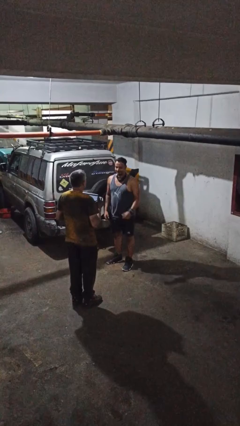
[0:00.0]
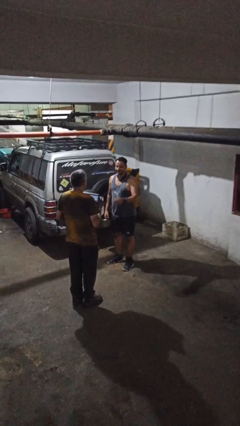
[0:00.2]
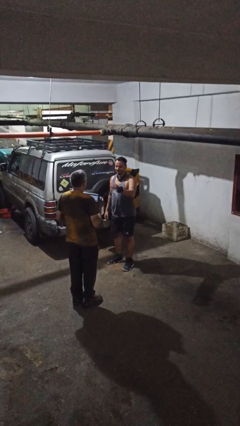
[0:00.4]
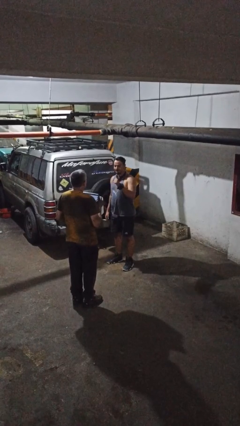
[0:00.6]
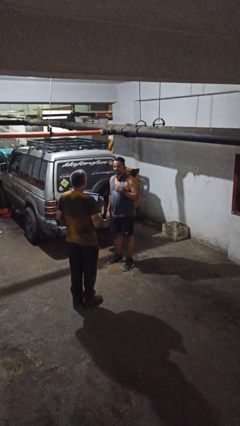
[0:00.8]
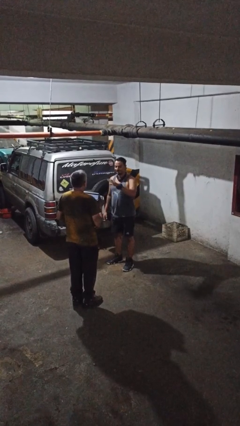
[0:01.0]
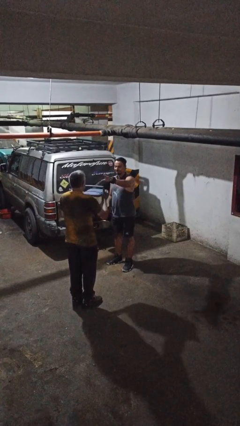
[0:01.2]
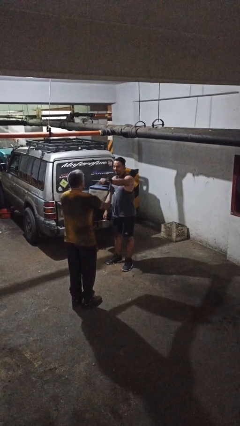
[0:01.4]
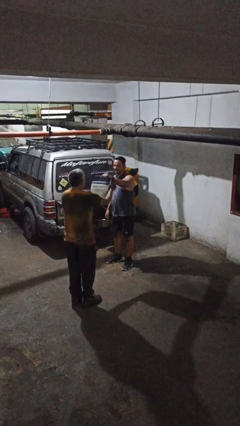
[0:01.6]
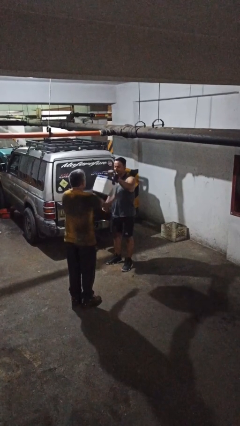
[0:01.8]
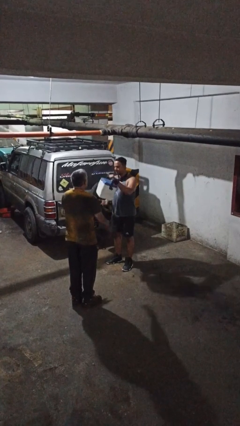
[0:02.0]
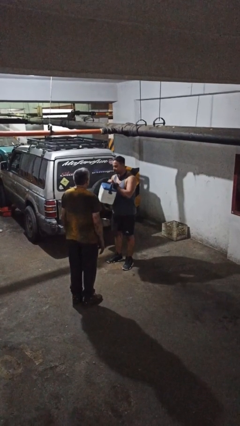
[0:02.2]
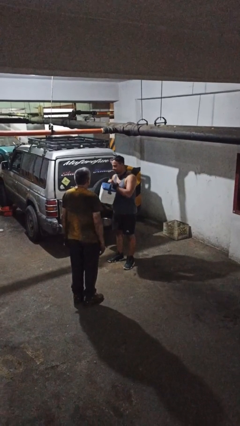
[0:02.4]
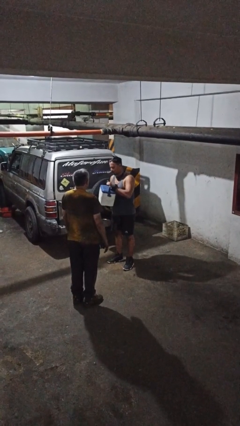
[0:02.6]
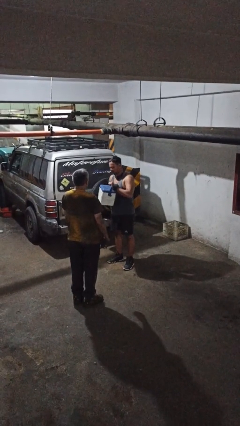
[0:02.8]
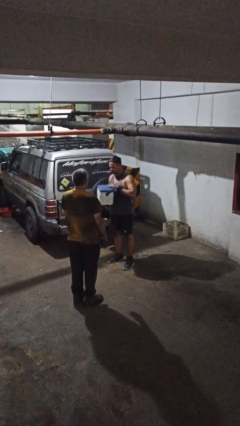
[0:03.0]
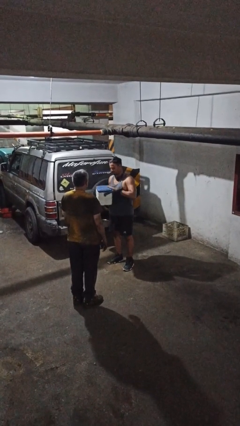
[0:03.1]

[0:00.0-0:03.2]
person transfers object to person

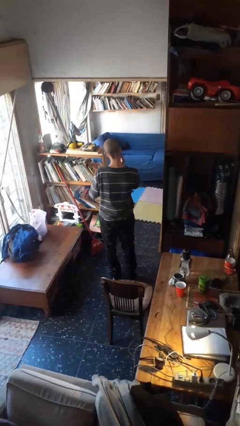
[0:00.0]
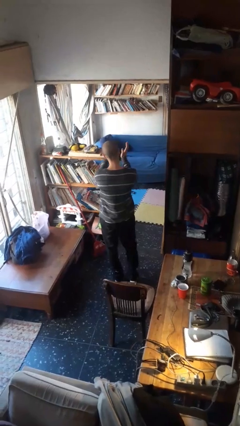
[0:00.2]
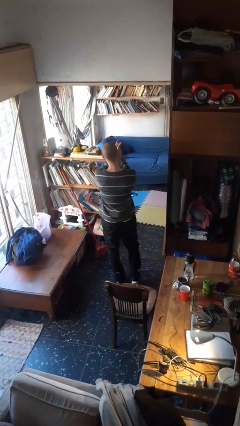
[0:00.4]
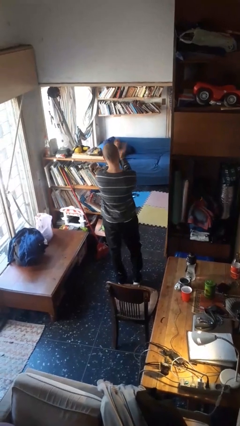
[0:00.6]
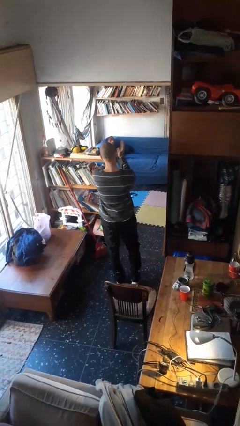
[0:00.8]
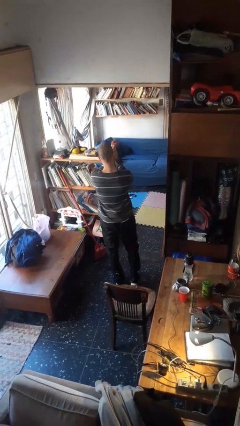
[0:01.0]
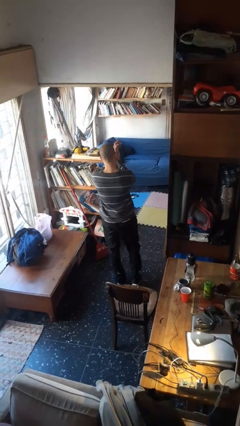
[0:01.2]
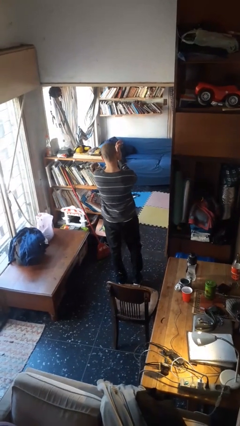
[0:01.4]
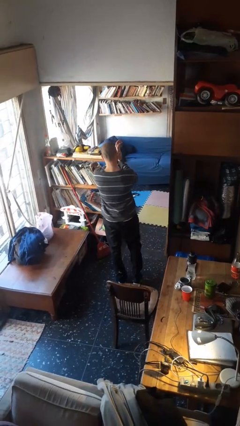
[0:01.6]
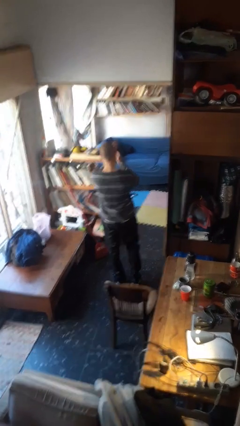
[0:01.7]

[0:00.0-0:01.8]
person claps hands

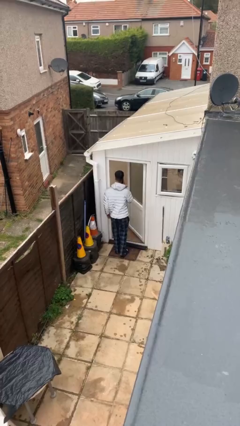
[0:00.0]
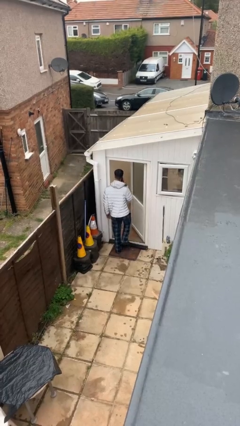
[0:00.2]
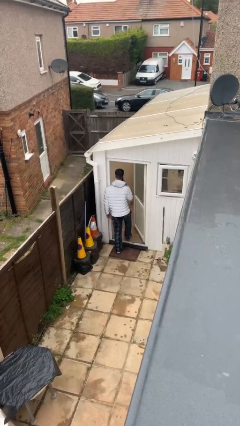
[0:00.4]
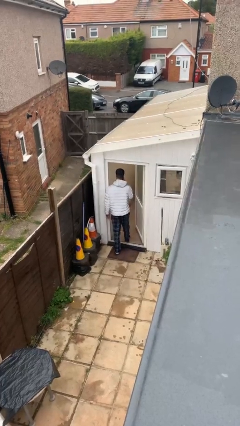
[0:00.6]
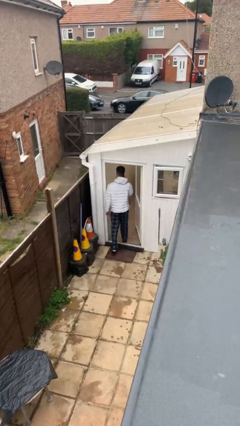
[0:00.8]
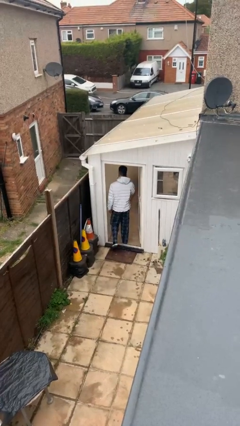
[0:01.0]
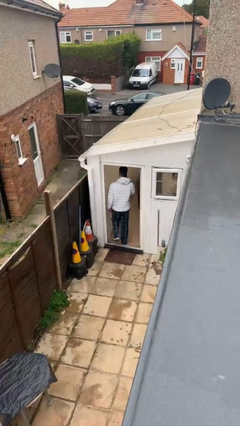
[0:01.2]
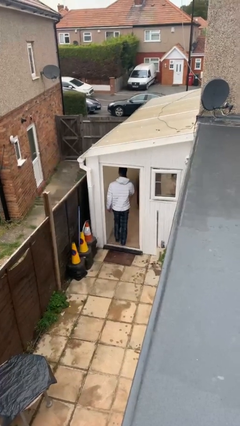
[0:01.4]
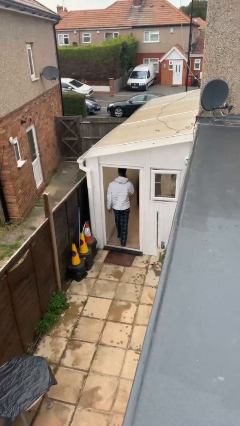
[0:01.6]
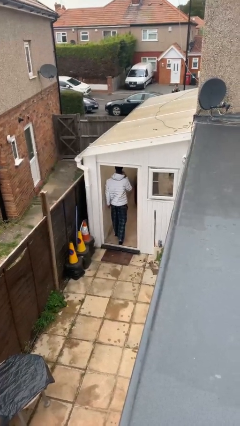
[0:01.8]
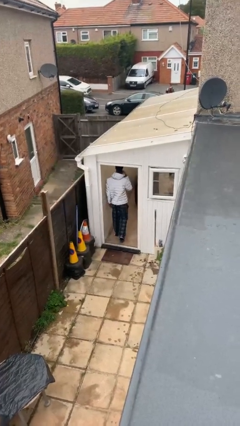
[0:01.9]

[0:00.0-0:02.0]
person exits scene through structure

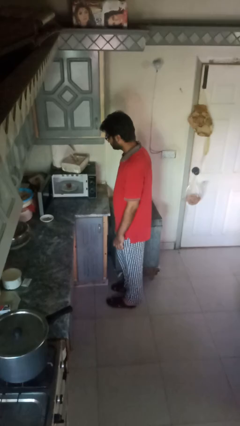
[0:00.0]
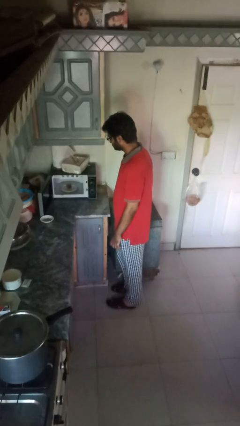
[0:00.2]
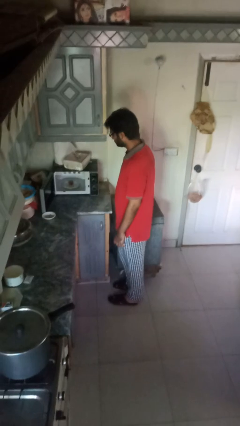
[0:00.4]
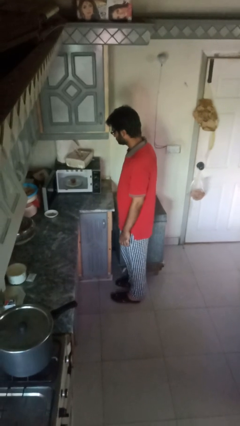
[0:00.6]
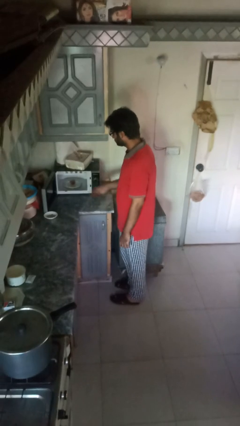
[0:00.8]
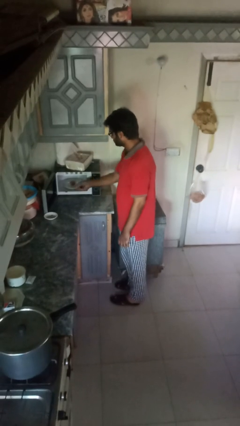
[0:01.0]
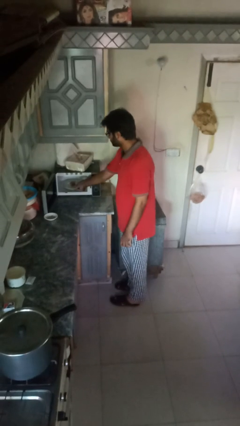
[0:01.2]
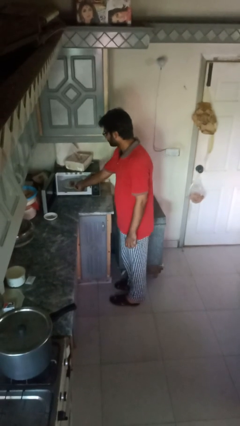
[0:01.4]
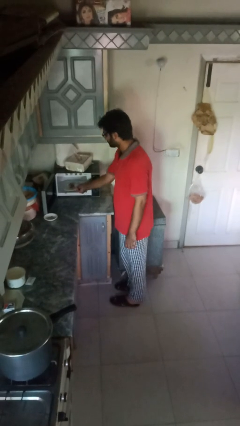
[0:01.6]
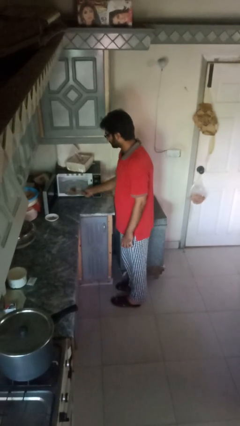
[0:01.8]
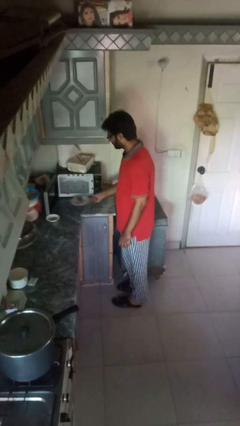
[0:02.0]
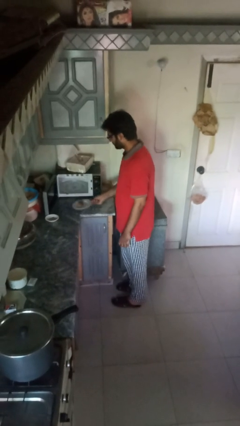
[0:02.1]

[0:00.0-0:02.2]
person takes object from oven

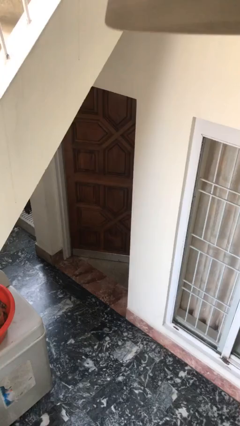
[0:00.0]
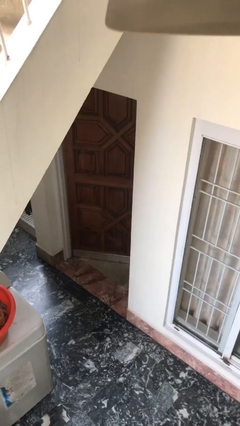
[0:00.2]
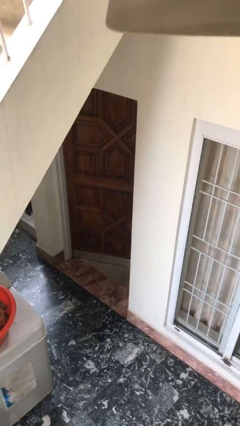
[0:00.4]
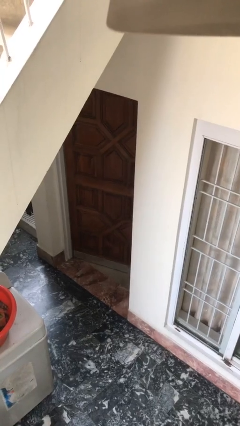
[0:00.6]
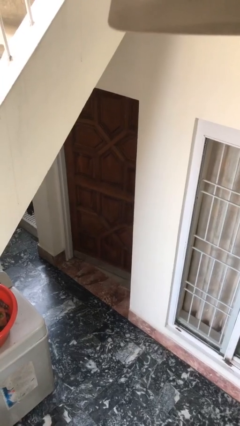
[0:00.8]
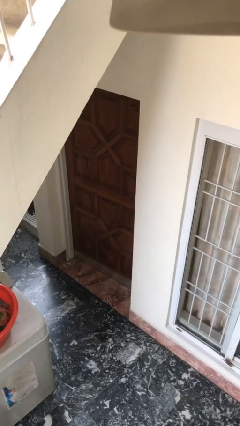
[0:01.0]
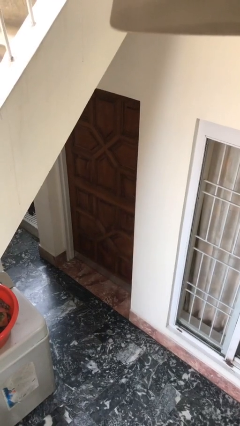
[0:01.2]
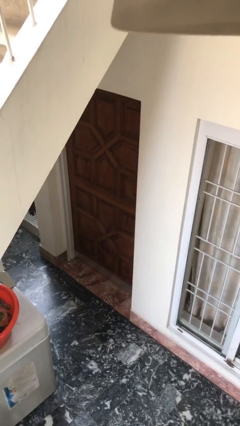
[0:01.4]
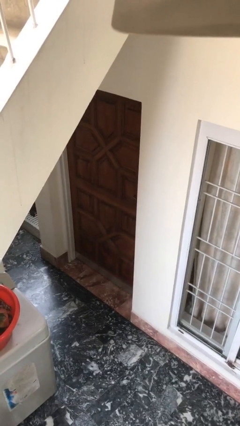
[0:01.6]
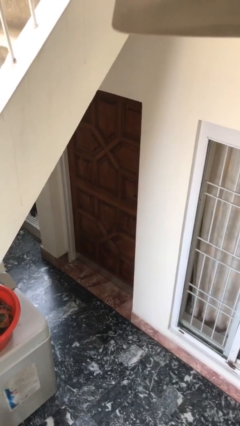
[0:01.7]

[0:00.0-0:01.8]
person closes facility door

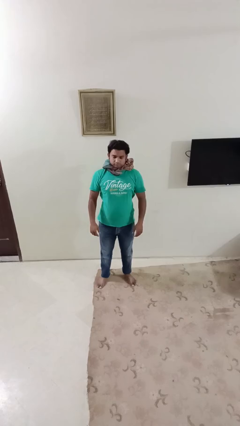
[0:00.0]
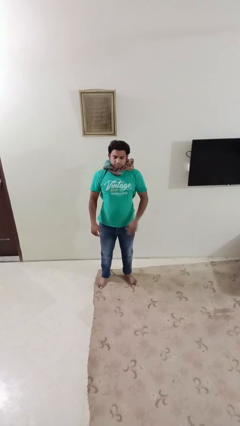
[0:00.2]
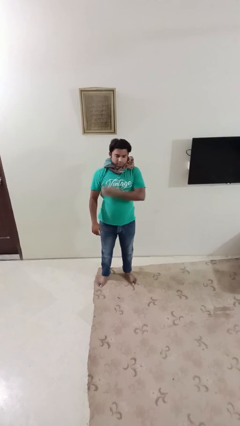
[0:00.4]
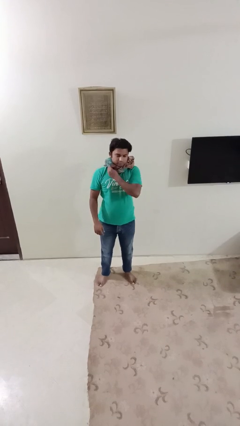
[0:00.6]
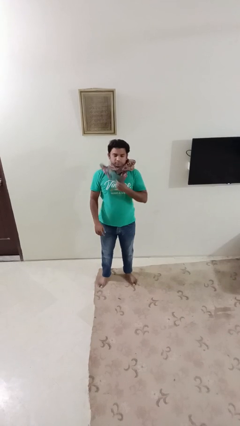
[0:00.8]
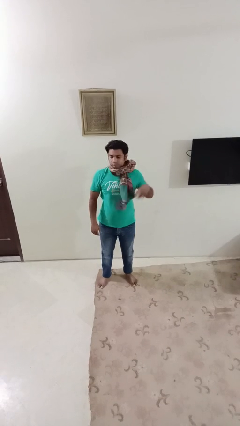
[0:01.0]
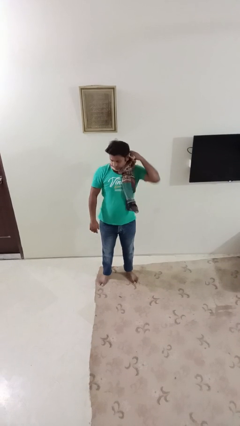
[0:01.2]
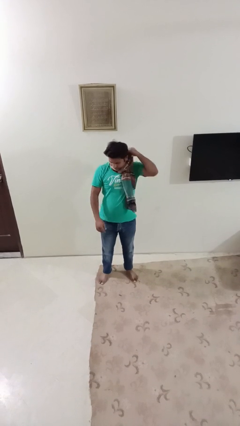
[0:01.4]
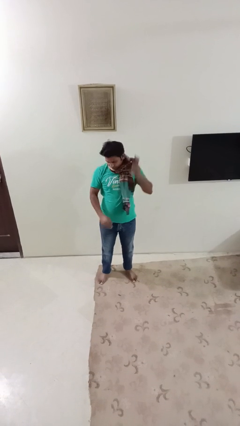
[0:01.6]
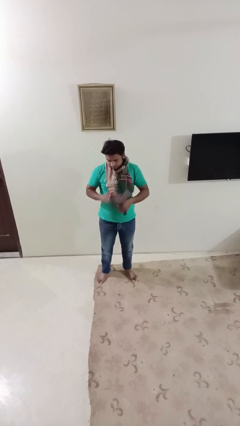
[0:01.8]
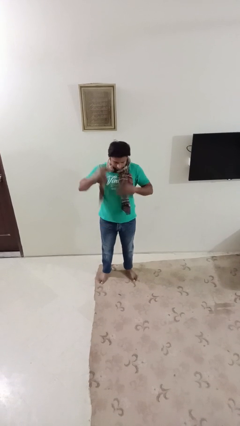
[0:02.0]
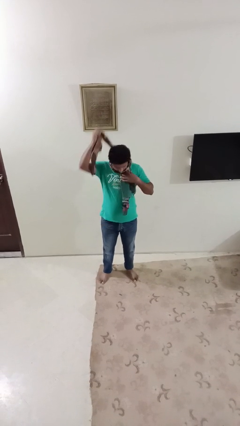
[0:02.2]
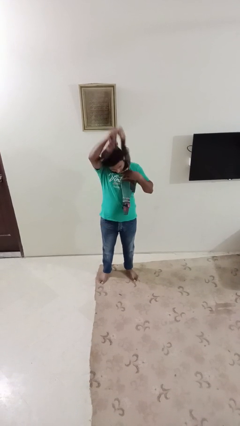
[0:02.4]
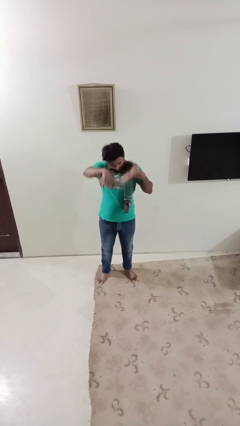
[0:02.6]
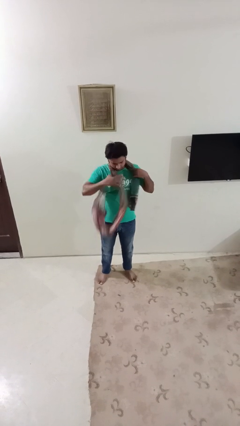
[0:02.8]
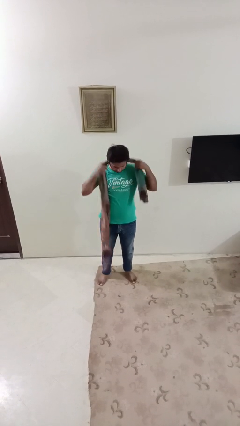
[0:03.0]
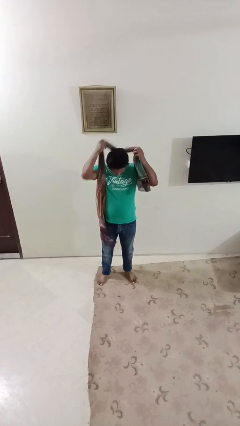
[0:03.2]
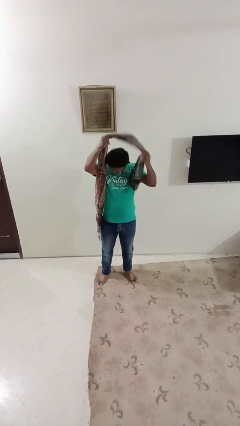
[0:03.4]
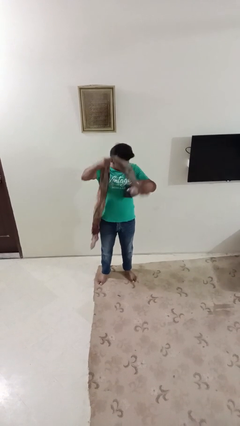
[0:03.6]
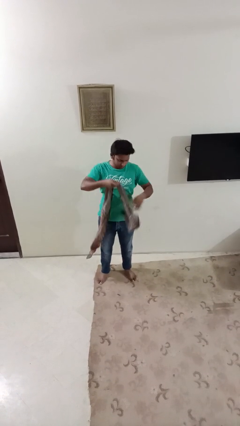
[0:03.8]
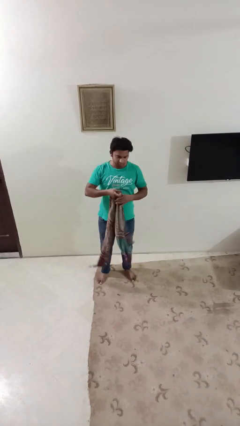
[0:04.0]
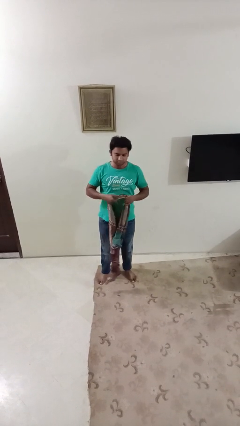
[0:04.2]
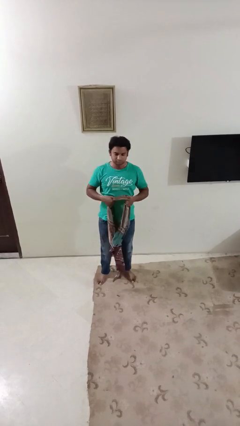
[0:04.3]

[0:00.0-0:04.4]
person takes off scarf

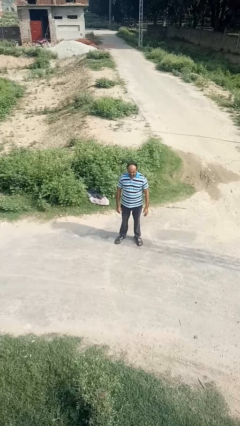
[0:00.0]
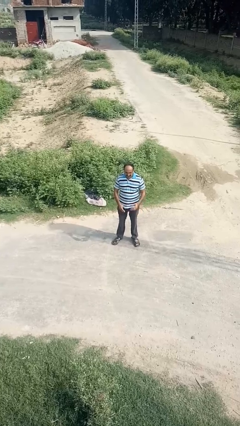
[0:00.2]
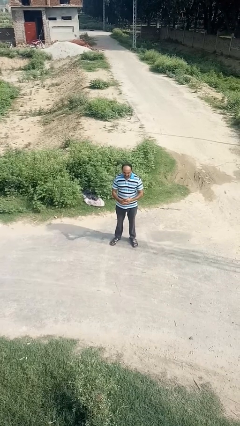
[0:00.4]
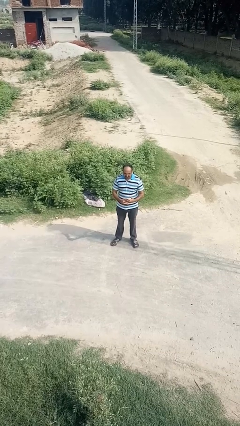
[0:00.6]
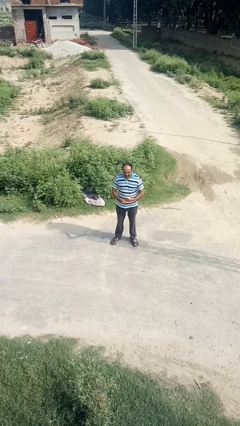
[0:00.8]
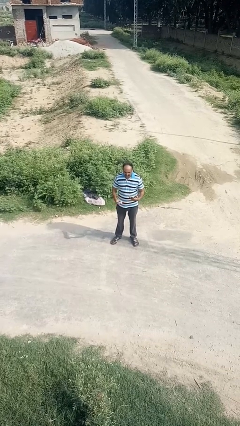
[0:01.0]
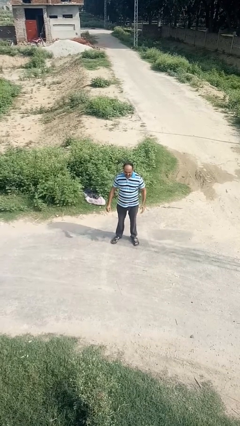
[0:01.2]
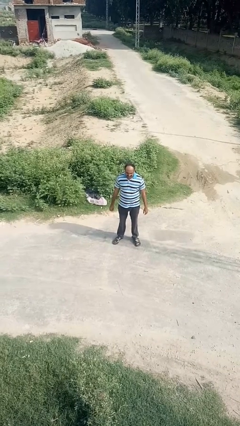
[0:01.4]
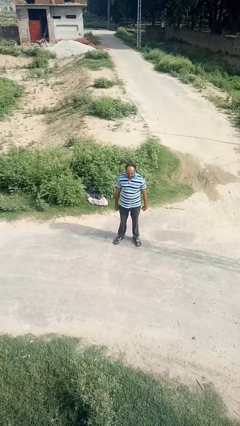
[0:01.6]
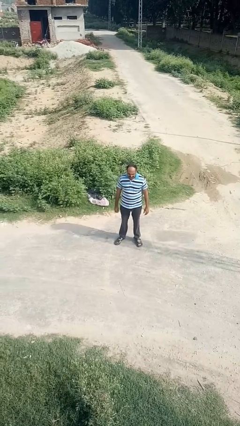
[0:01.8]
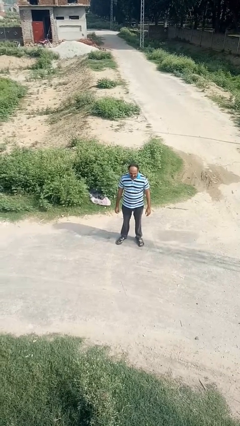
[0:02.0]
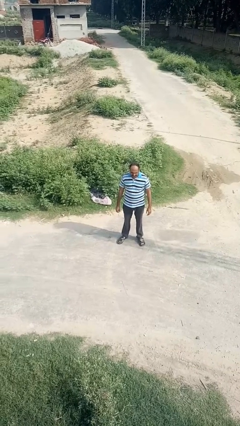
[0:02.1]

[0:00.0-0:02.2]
person takes off ring
